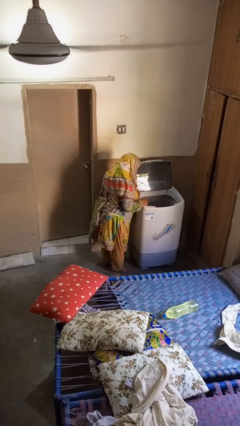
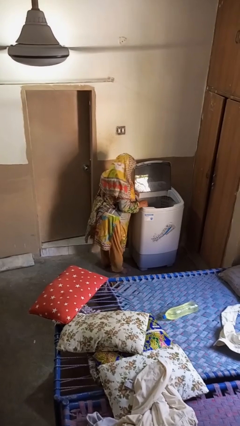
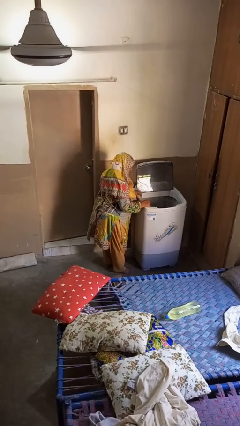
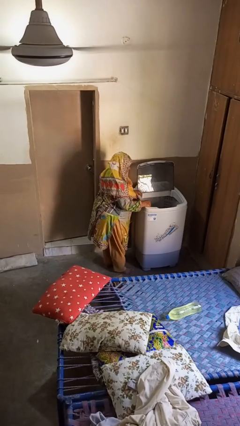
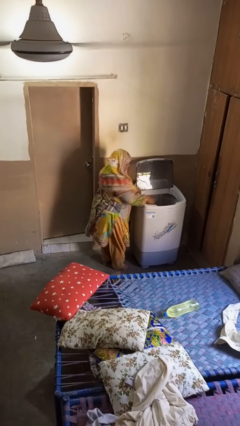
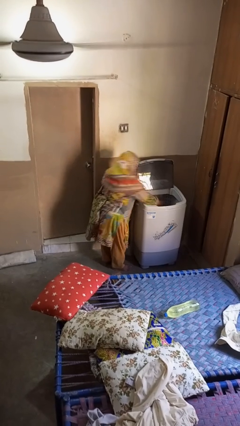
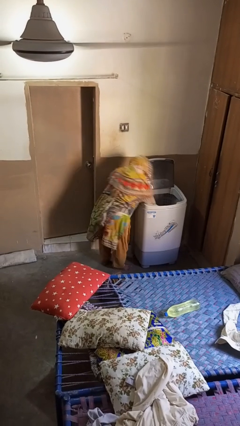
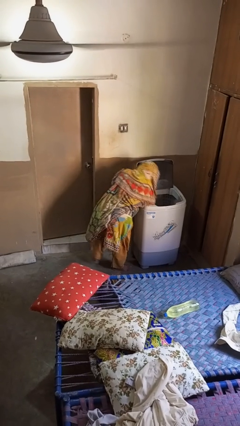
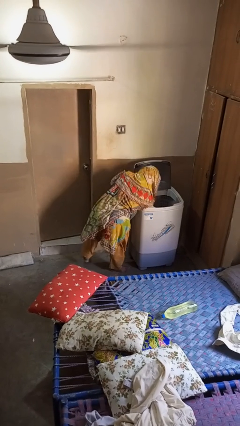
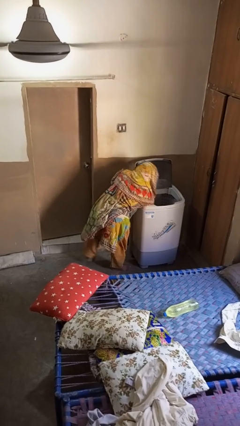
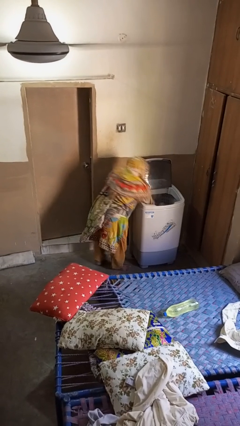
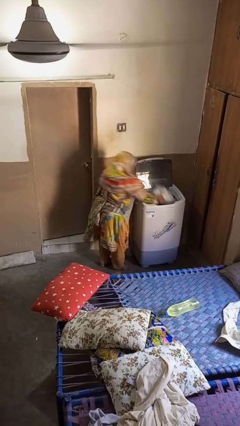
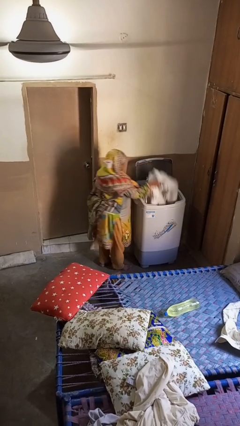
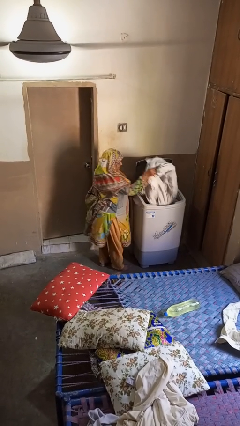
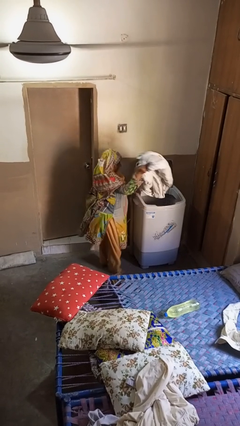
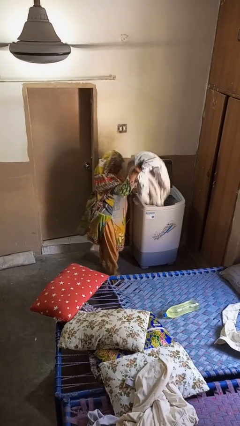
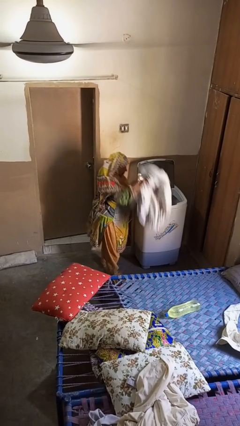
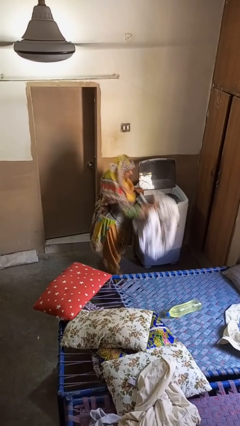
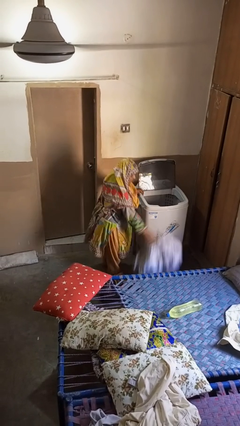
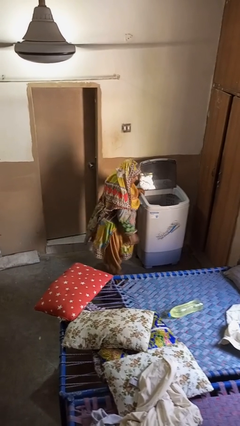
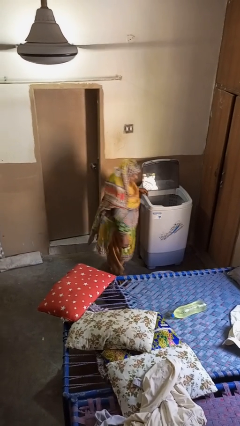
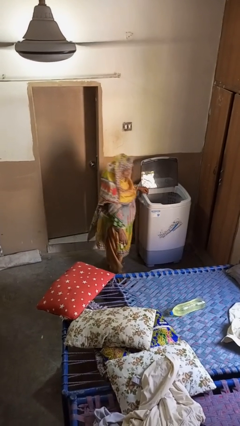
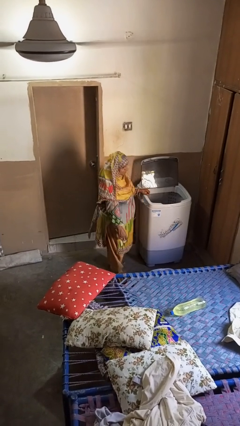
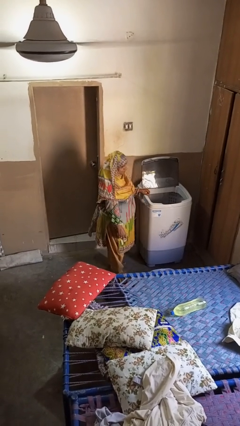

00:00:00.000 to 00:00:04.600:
person unloads clotheswasher

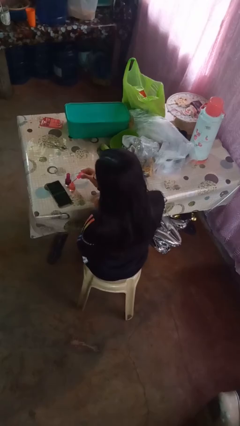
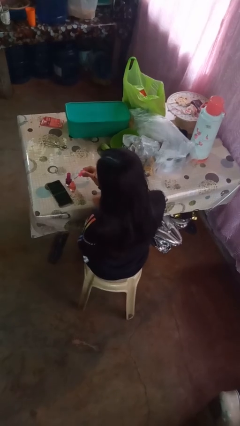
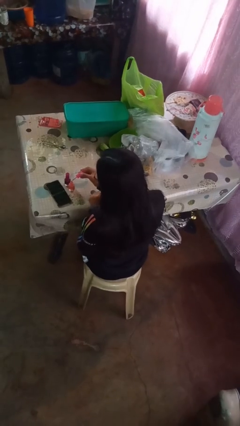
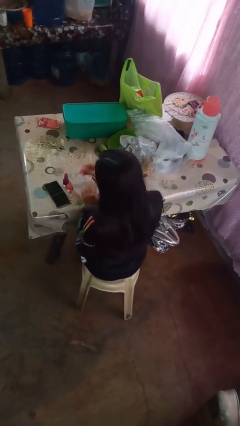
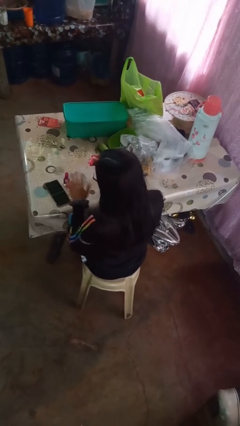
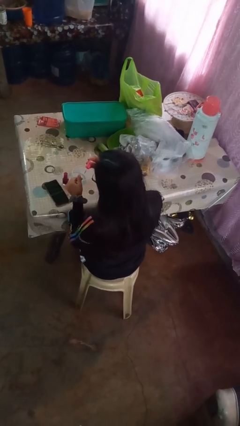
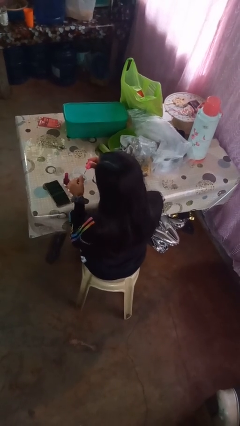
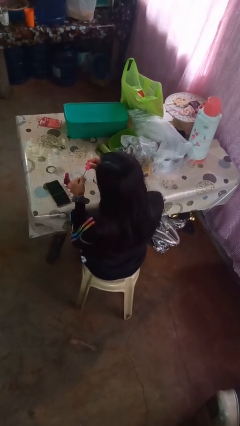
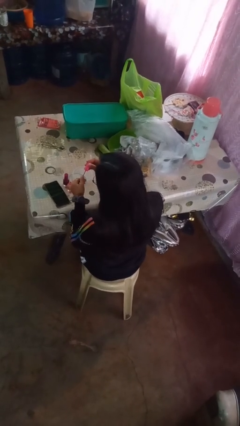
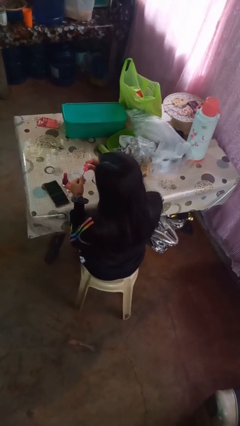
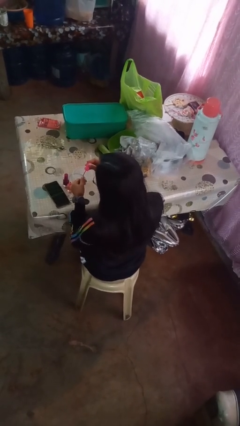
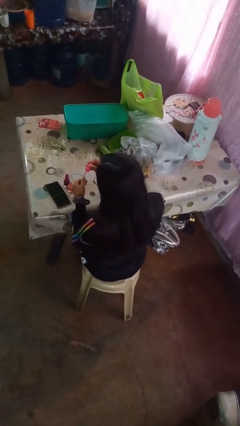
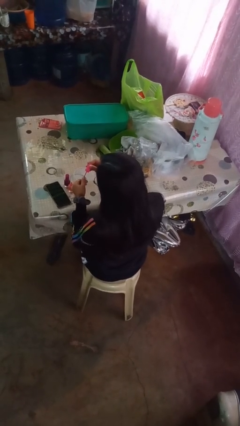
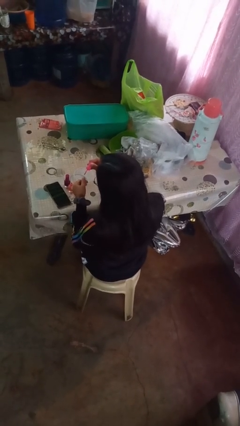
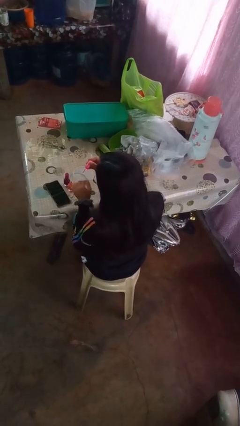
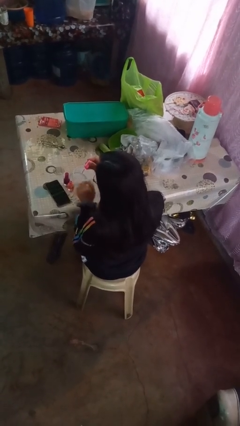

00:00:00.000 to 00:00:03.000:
person paints fingernails

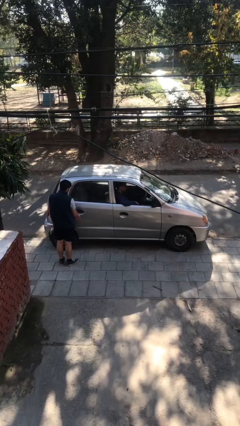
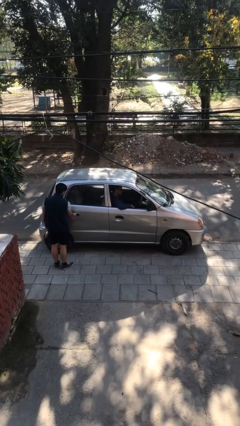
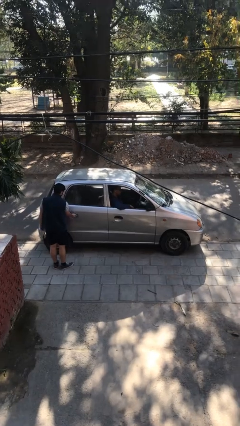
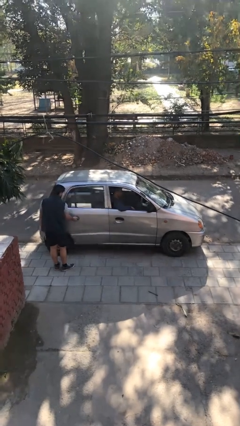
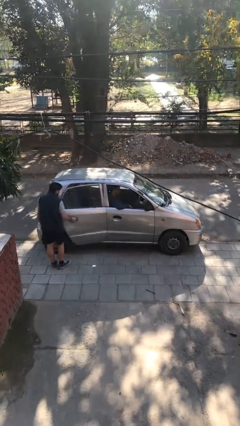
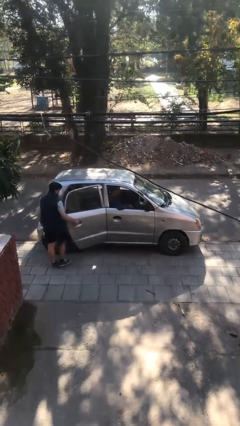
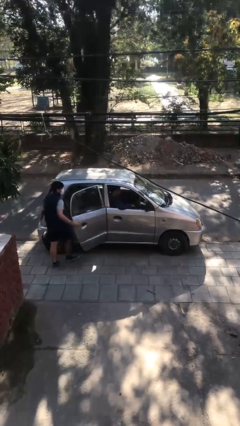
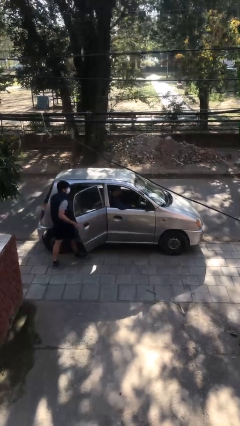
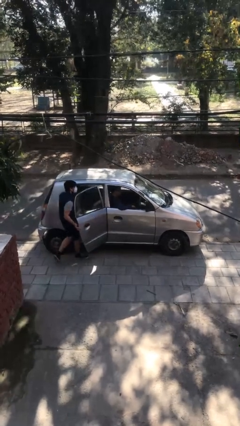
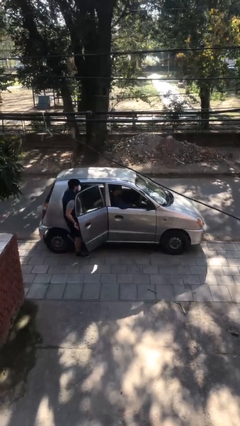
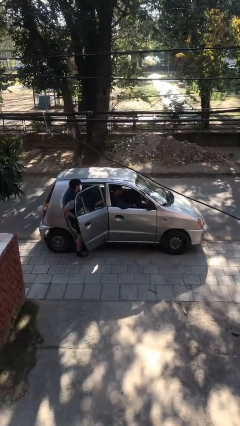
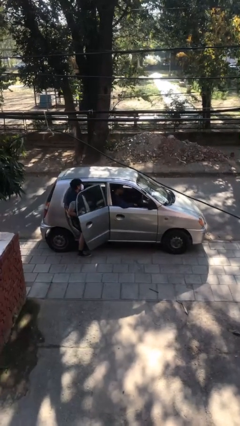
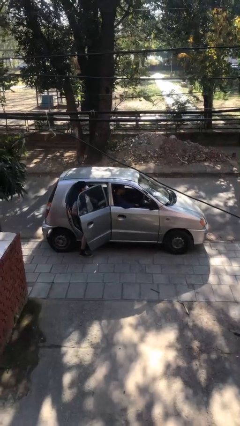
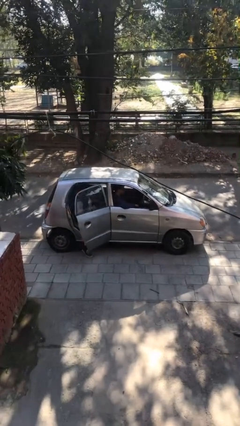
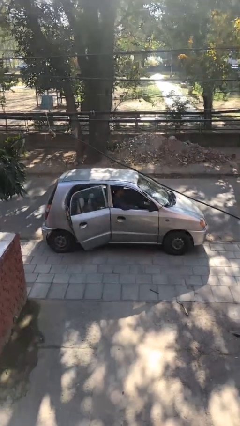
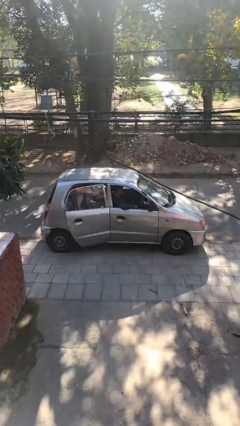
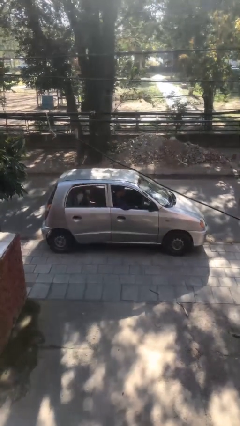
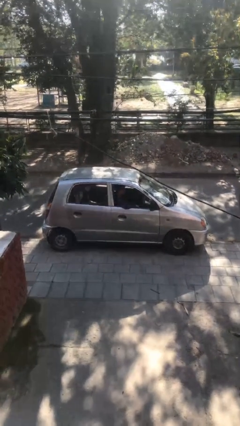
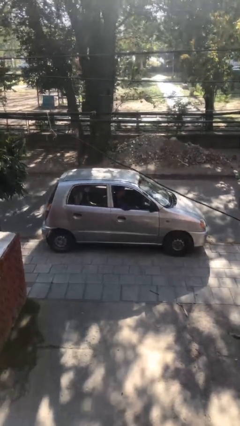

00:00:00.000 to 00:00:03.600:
car picks up person

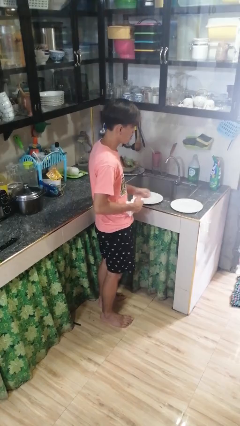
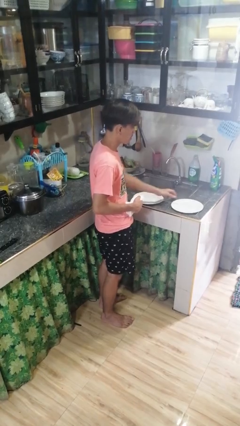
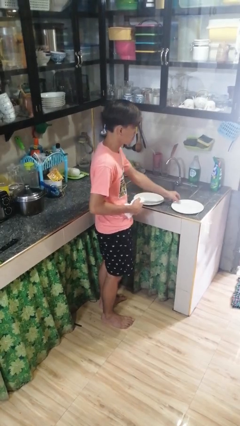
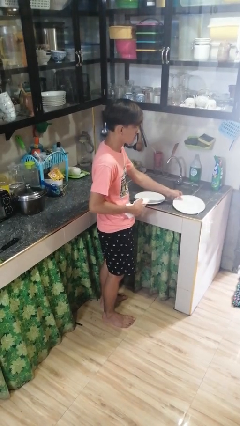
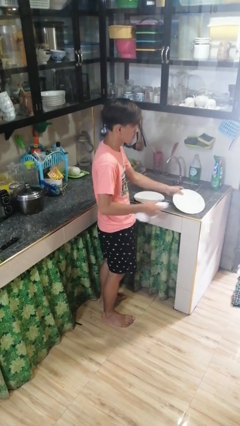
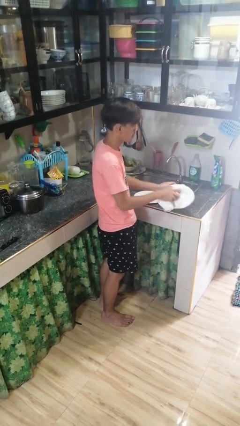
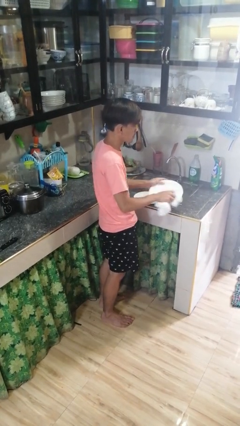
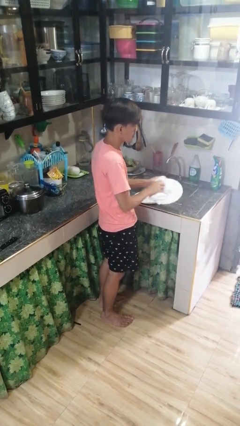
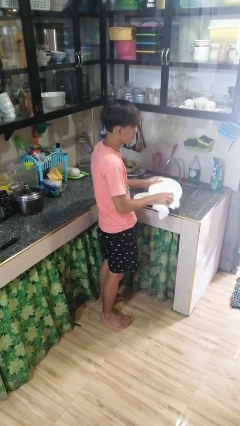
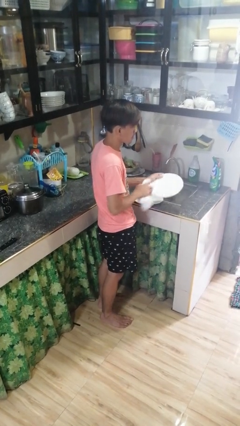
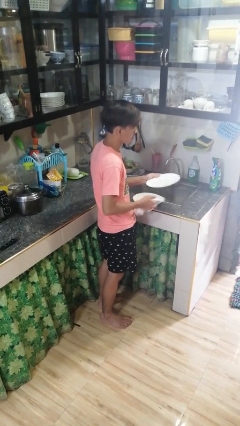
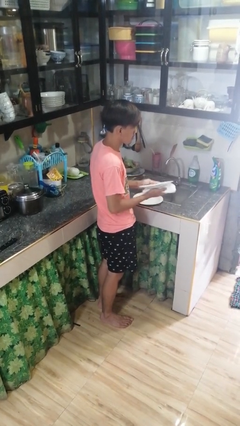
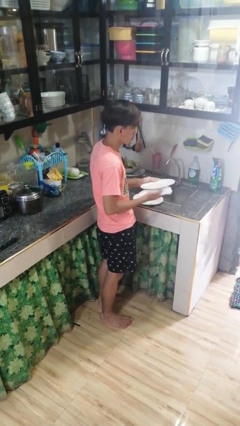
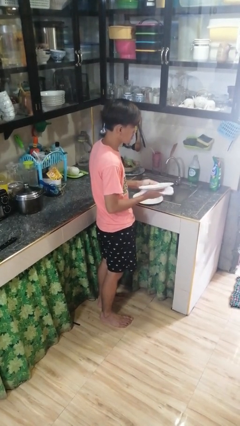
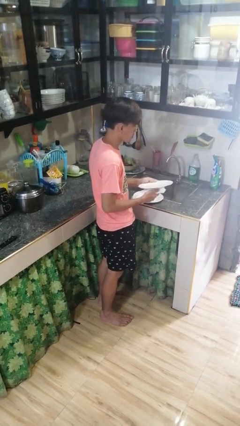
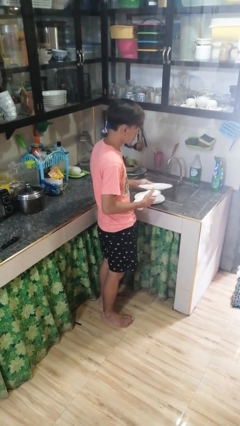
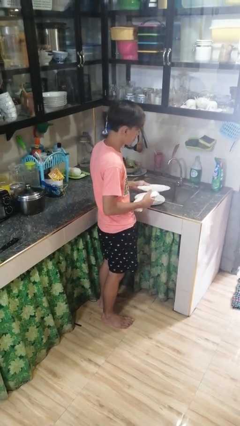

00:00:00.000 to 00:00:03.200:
person dries dish

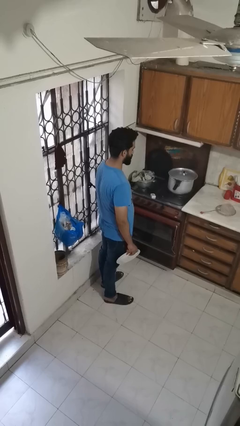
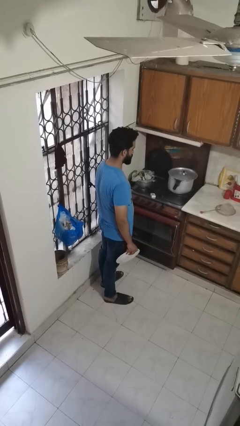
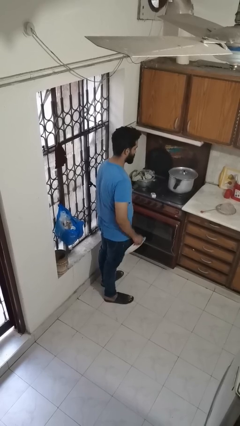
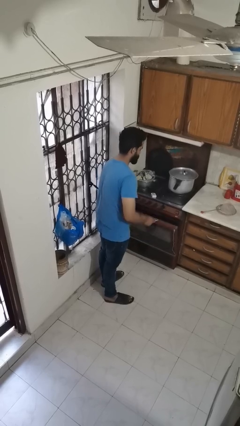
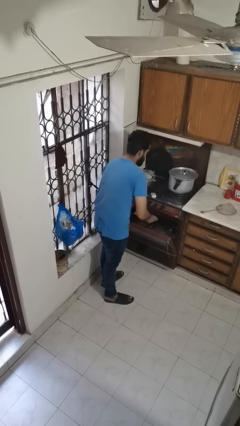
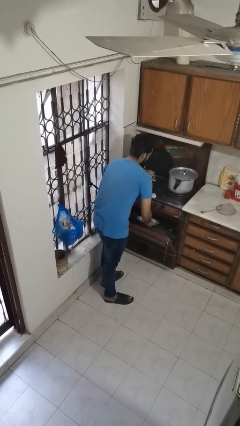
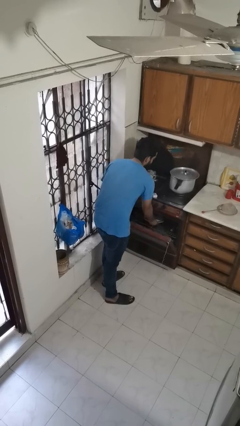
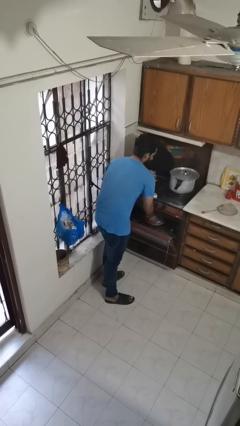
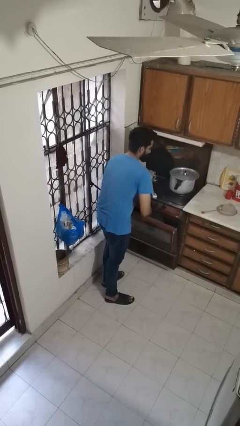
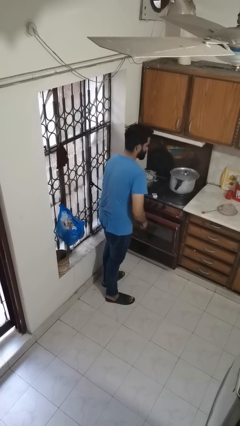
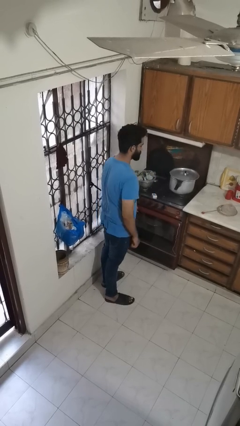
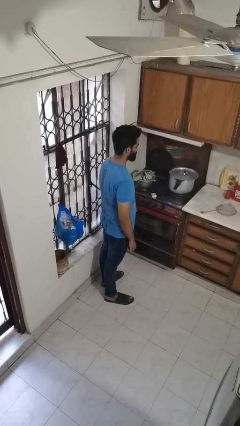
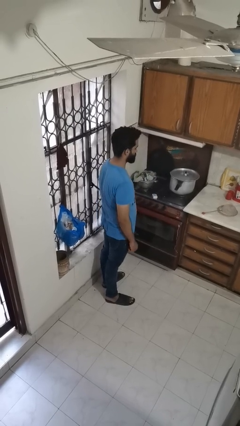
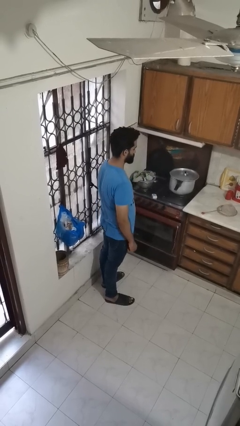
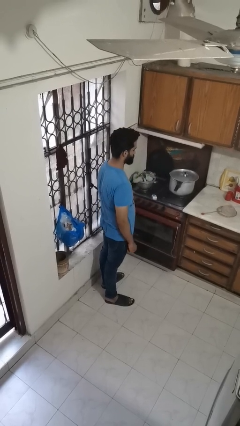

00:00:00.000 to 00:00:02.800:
person puts object into oven

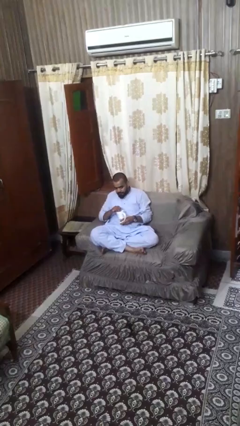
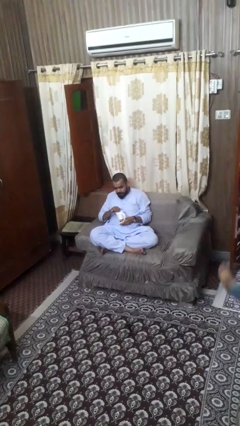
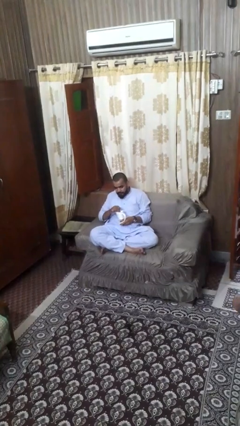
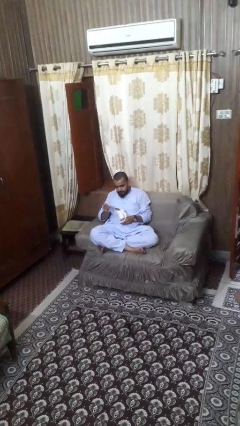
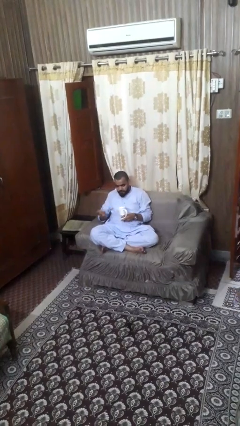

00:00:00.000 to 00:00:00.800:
person stirs mug
